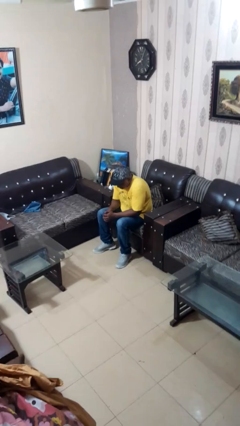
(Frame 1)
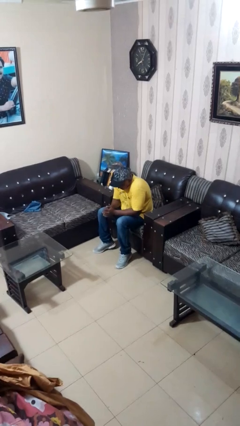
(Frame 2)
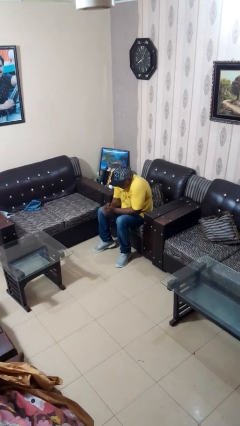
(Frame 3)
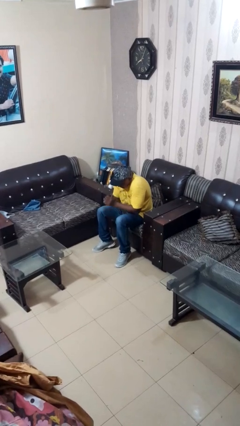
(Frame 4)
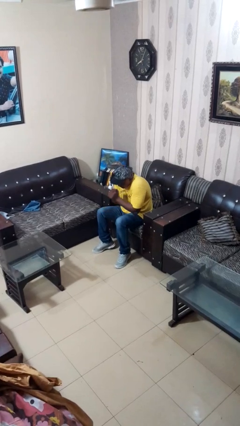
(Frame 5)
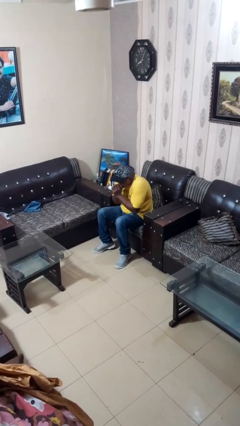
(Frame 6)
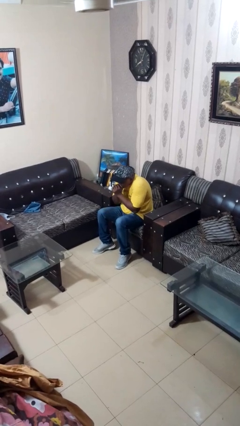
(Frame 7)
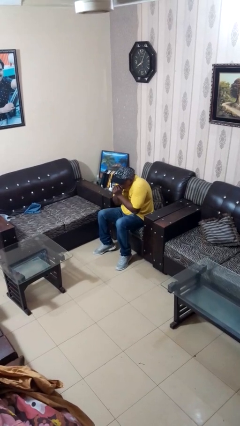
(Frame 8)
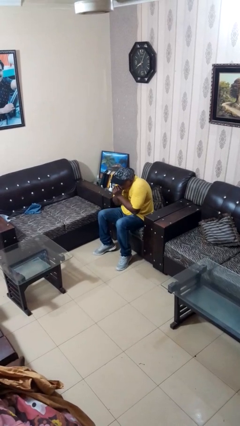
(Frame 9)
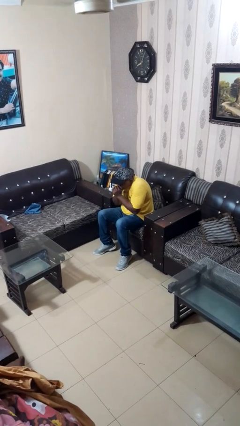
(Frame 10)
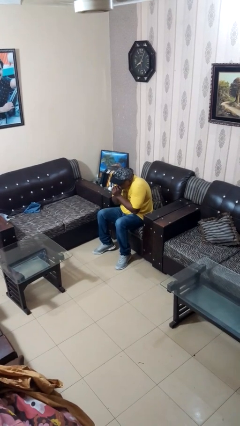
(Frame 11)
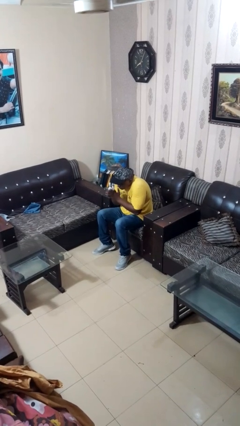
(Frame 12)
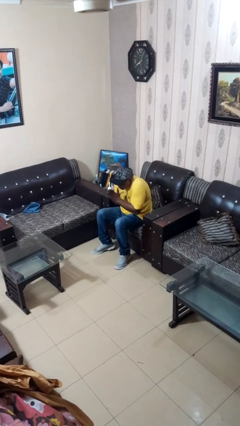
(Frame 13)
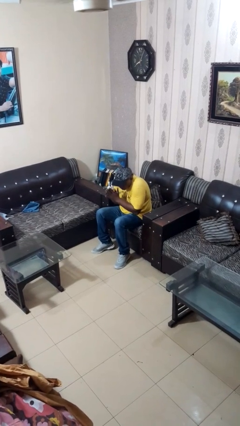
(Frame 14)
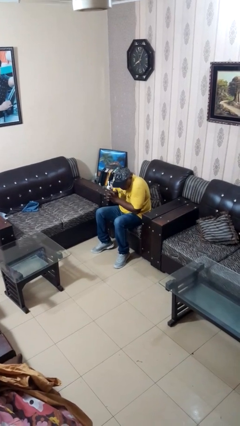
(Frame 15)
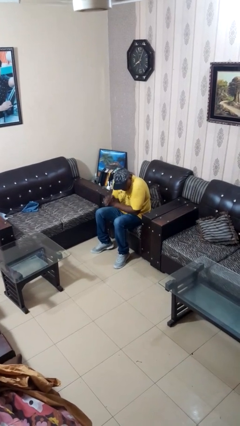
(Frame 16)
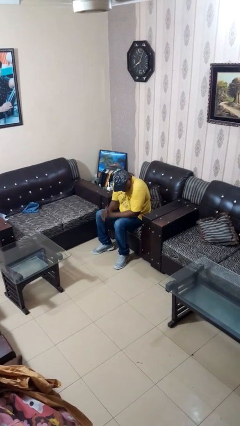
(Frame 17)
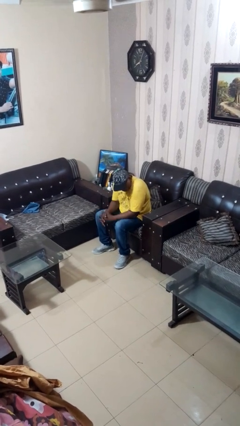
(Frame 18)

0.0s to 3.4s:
person blows into hands

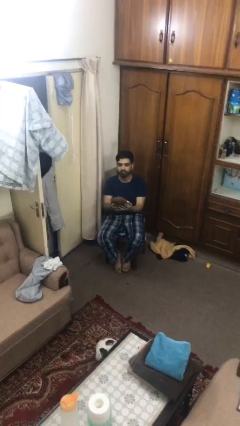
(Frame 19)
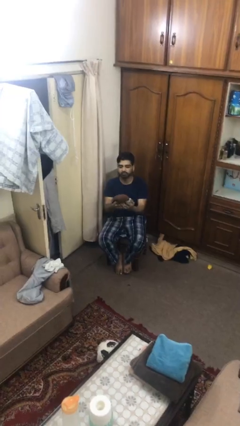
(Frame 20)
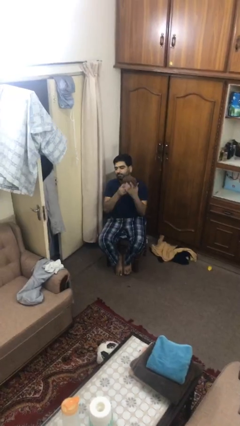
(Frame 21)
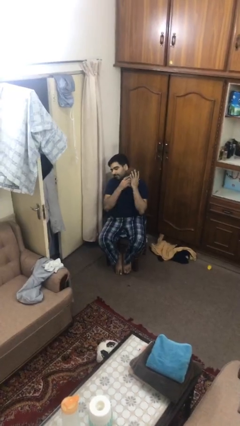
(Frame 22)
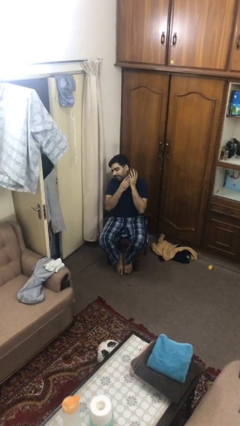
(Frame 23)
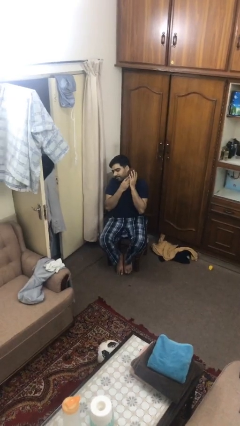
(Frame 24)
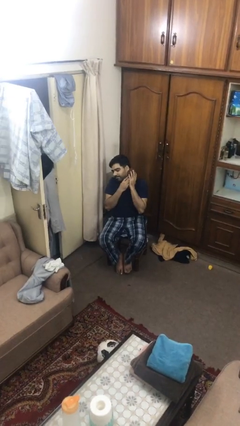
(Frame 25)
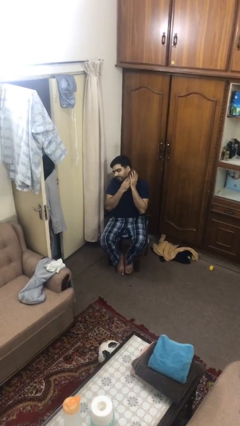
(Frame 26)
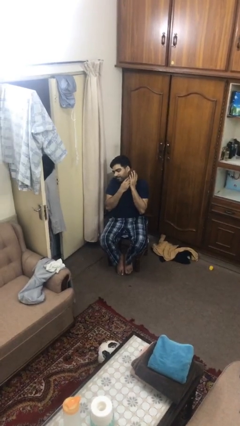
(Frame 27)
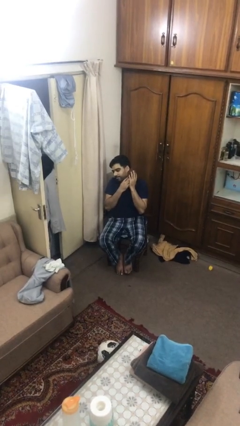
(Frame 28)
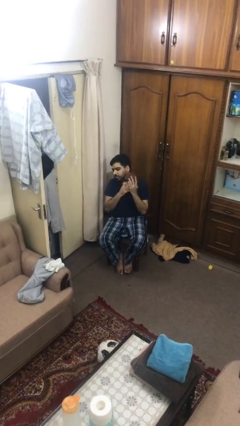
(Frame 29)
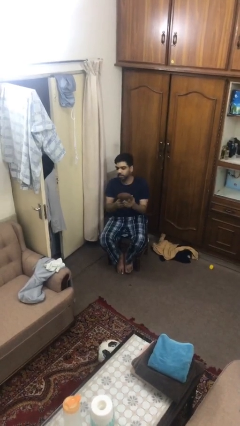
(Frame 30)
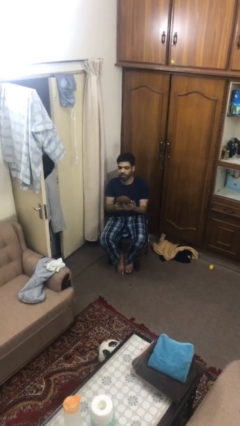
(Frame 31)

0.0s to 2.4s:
person hugs stuffed animal

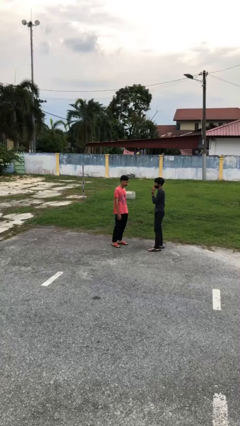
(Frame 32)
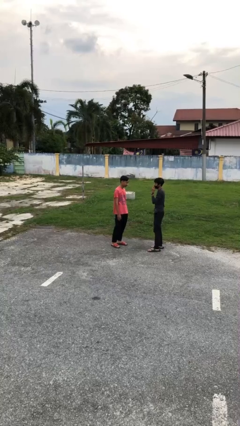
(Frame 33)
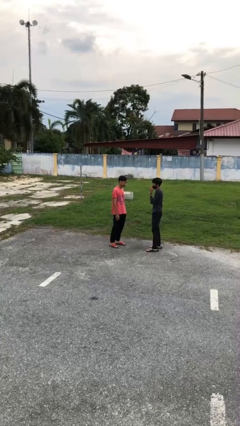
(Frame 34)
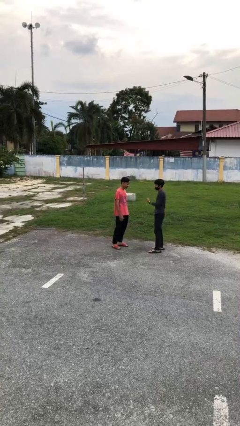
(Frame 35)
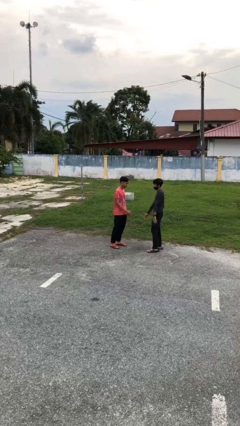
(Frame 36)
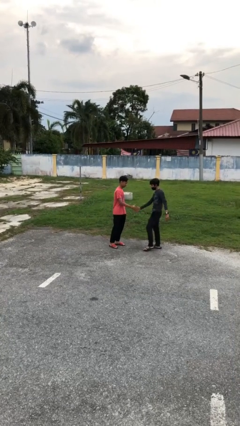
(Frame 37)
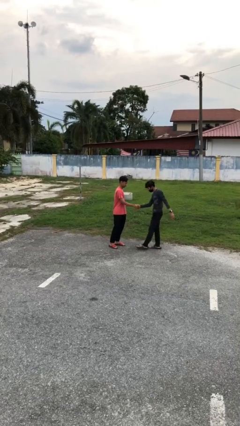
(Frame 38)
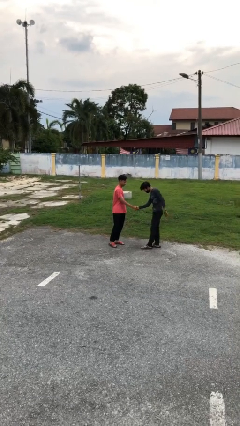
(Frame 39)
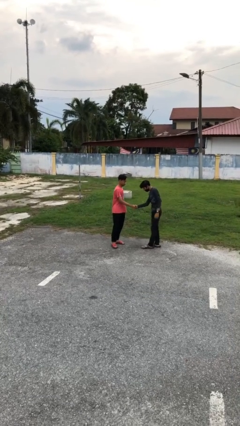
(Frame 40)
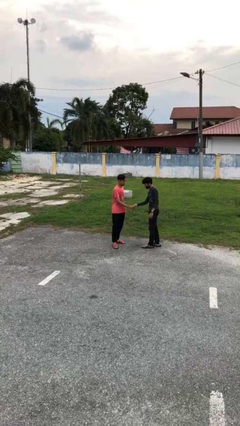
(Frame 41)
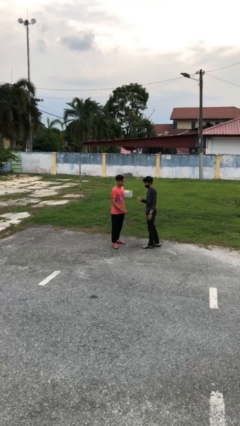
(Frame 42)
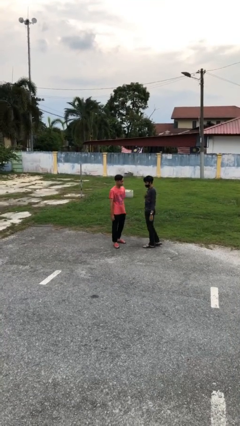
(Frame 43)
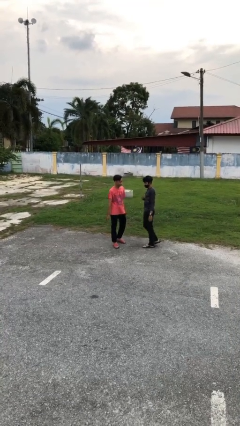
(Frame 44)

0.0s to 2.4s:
person shakes hand

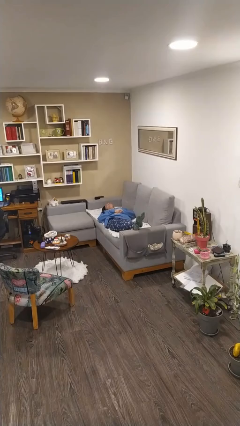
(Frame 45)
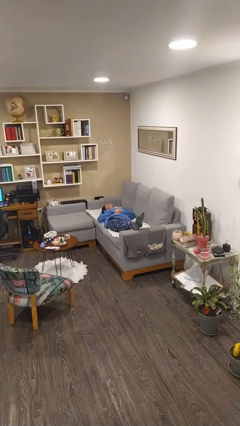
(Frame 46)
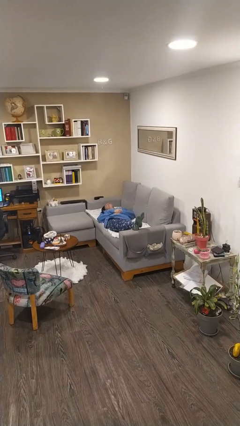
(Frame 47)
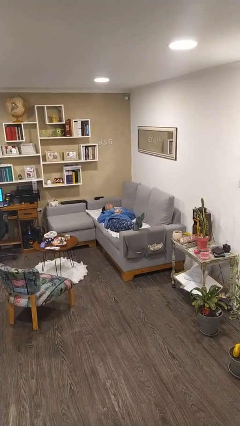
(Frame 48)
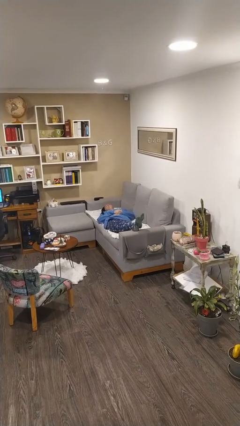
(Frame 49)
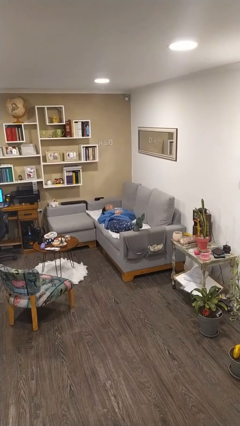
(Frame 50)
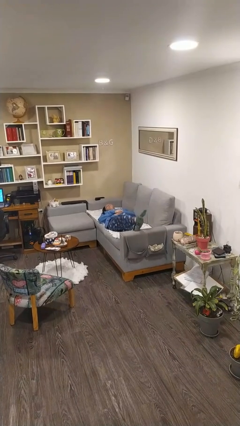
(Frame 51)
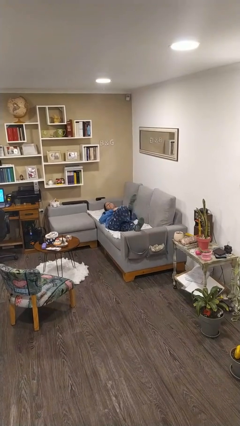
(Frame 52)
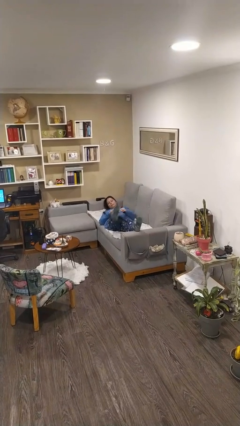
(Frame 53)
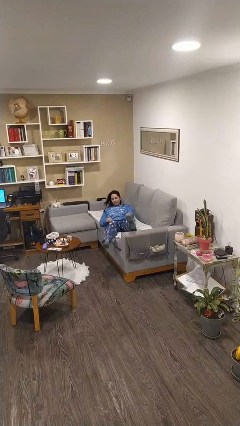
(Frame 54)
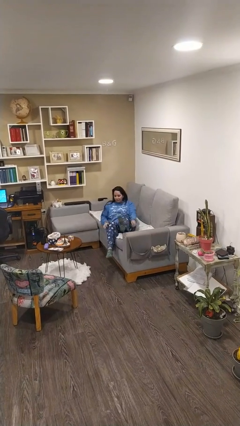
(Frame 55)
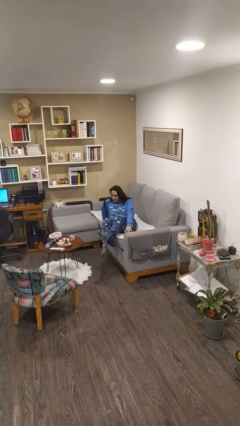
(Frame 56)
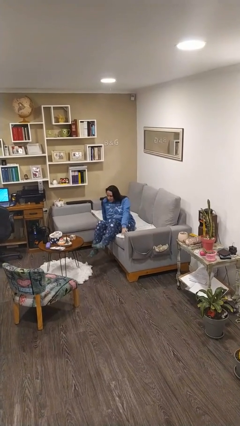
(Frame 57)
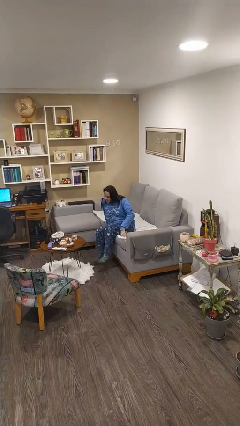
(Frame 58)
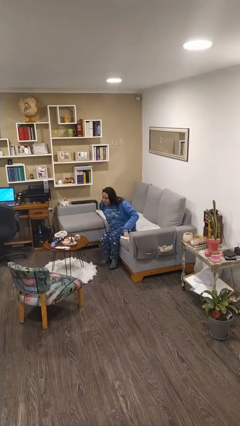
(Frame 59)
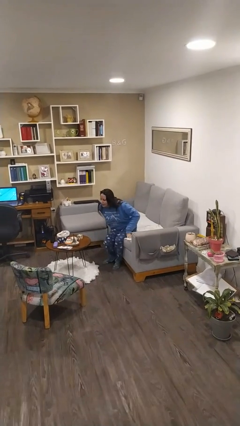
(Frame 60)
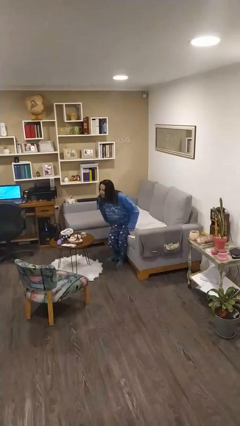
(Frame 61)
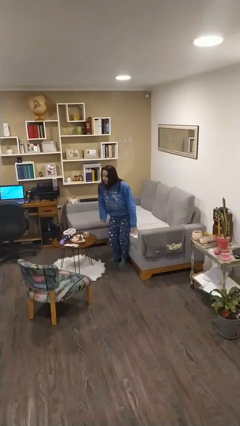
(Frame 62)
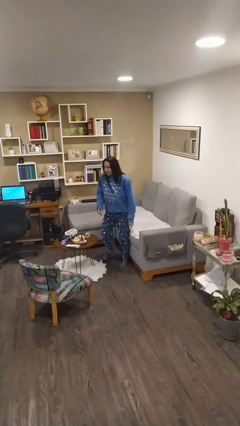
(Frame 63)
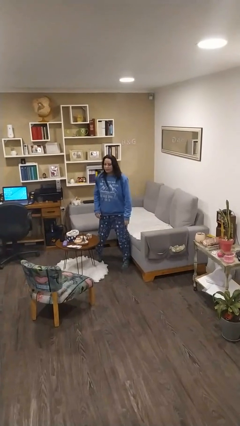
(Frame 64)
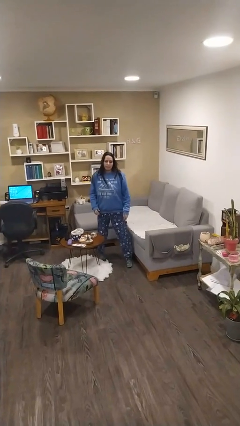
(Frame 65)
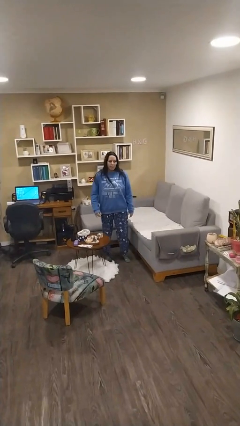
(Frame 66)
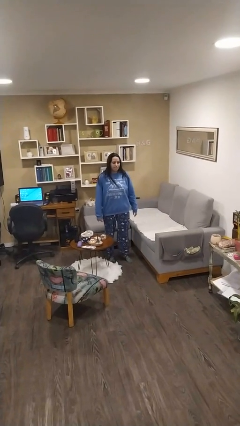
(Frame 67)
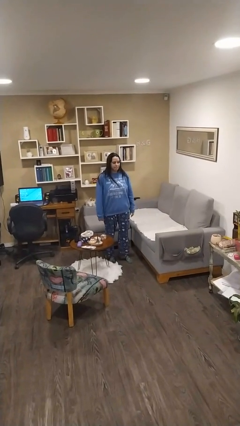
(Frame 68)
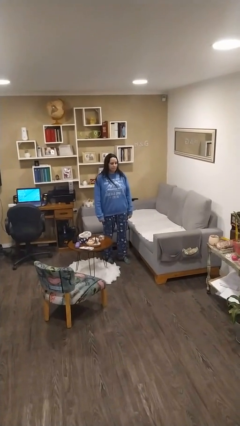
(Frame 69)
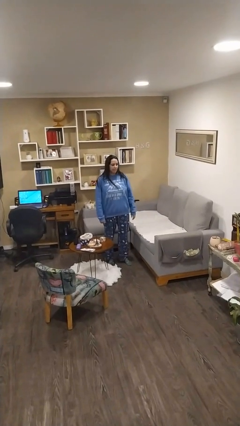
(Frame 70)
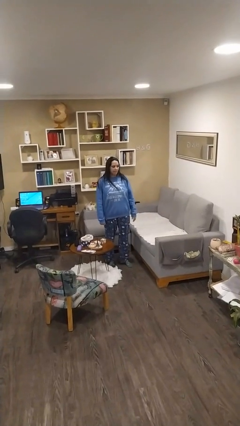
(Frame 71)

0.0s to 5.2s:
person stands up

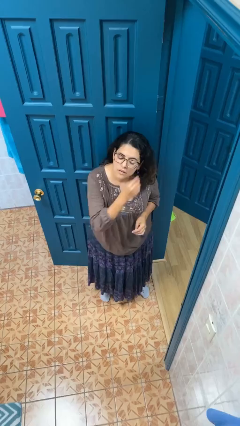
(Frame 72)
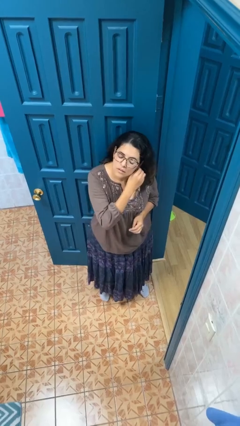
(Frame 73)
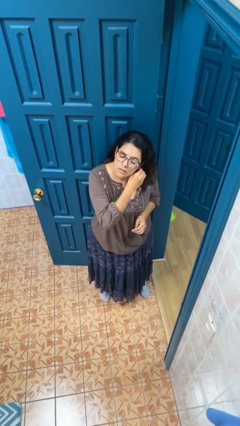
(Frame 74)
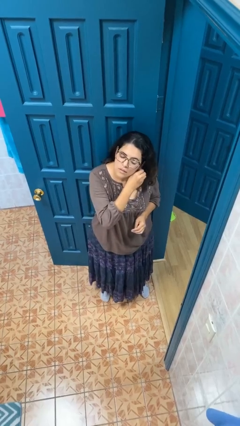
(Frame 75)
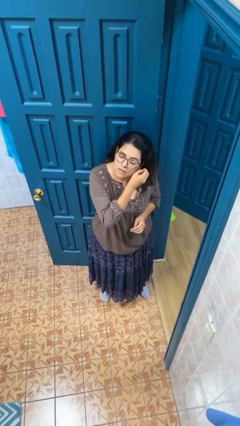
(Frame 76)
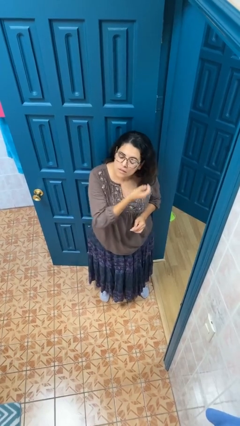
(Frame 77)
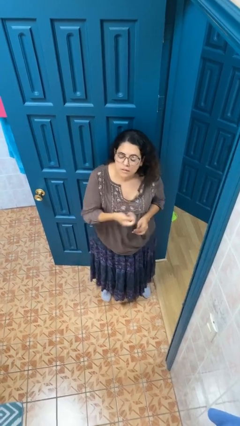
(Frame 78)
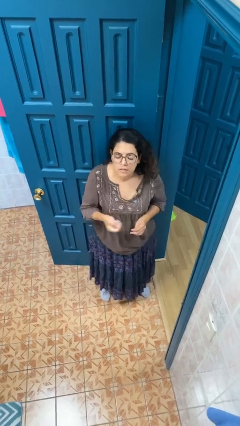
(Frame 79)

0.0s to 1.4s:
person takes off earrings

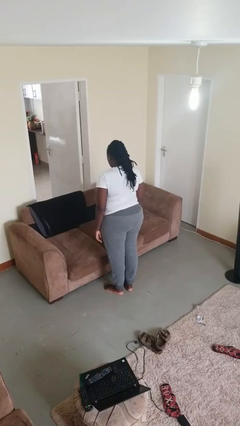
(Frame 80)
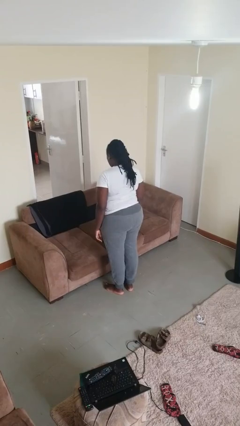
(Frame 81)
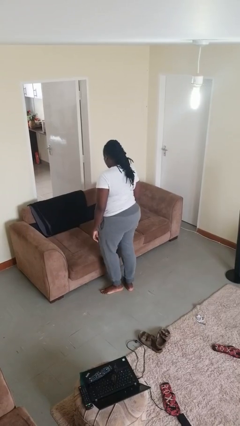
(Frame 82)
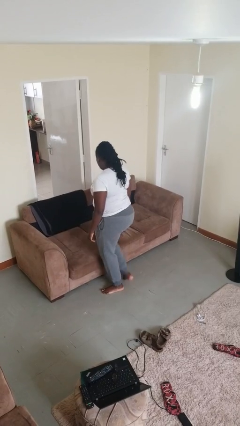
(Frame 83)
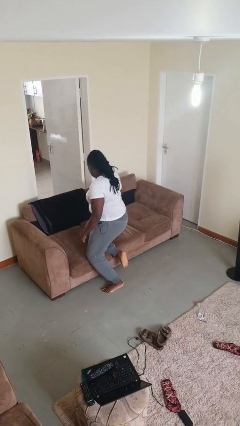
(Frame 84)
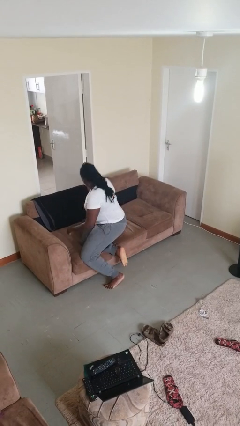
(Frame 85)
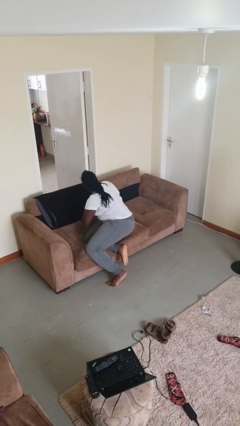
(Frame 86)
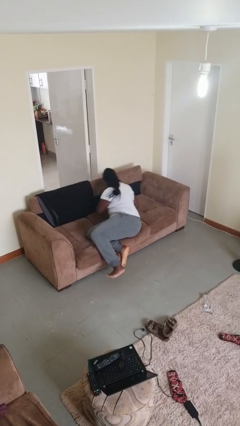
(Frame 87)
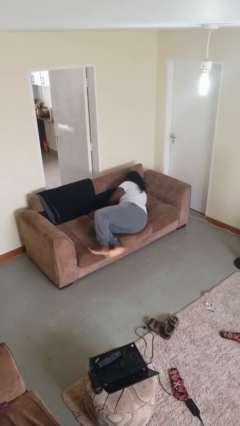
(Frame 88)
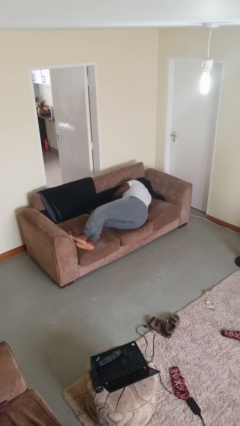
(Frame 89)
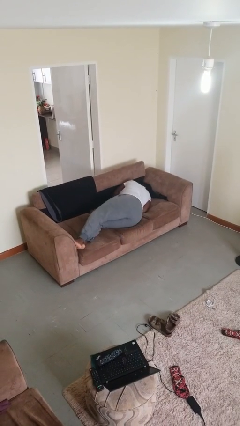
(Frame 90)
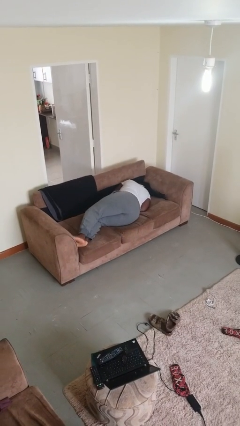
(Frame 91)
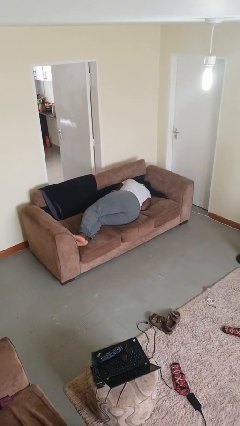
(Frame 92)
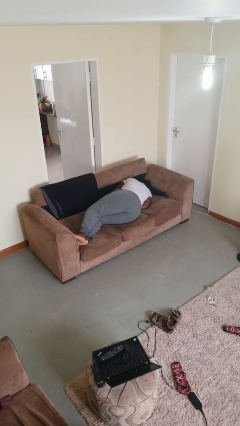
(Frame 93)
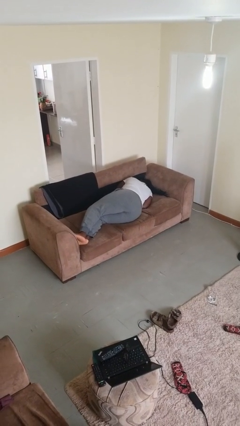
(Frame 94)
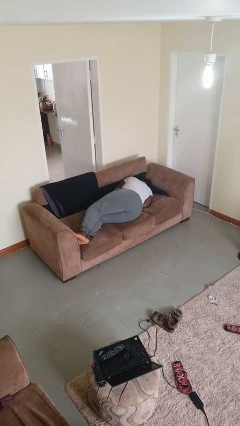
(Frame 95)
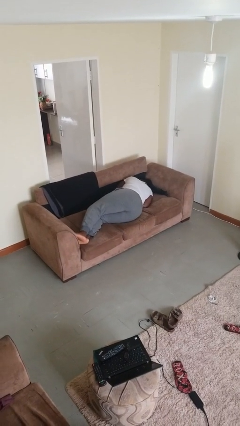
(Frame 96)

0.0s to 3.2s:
person lies down on bed
